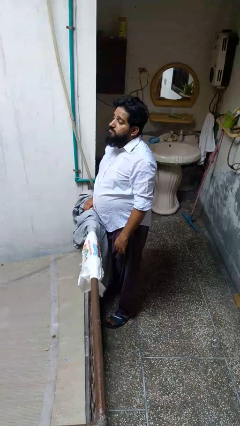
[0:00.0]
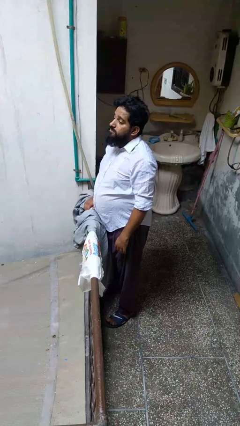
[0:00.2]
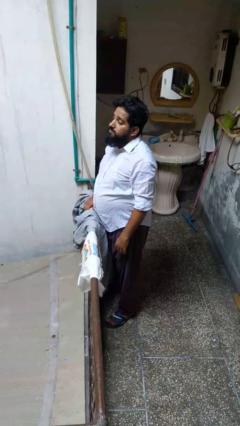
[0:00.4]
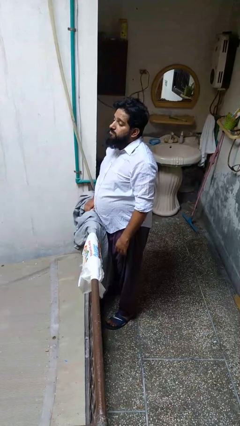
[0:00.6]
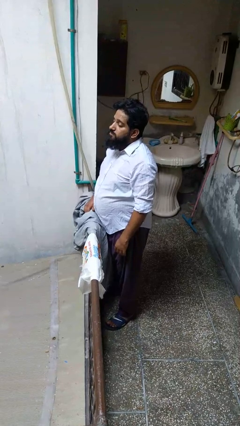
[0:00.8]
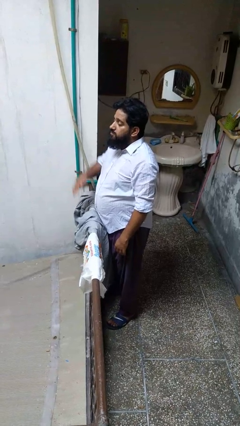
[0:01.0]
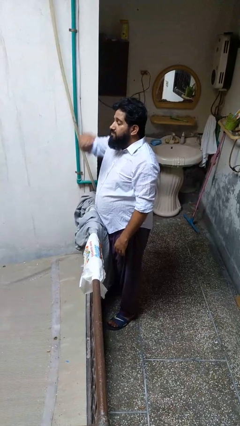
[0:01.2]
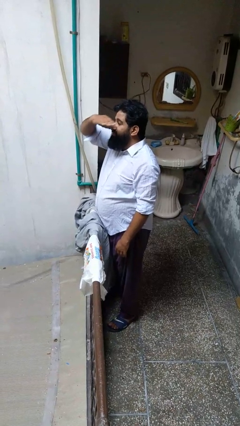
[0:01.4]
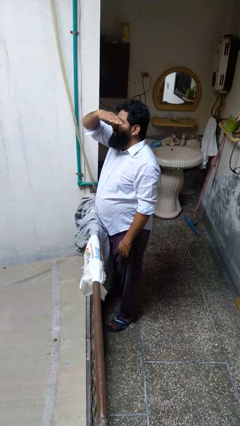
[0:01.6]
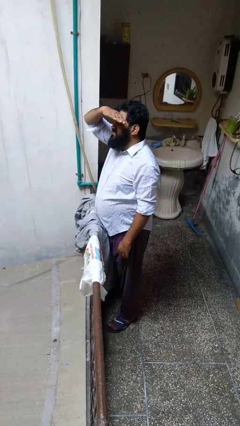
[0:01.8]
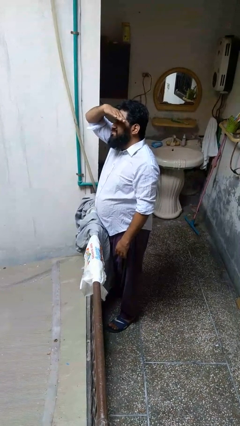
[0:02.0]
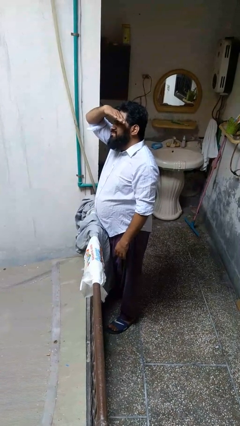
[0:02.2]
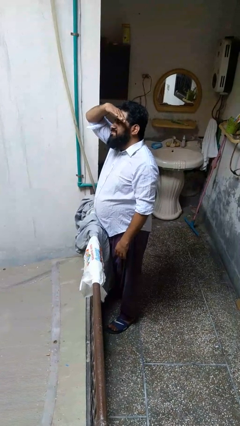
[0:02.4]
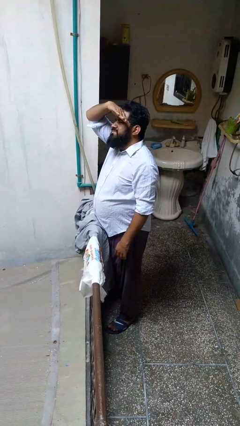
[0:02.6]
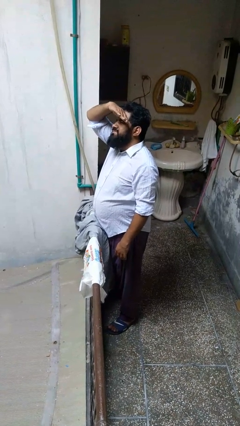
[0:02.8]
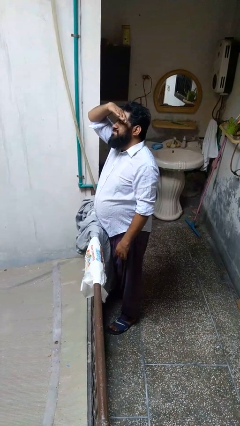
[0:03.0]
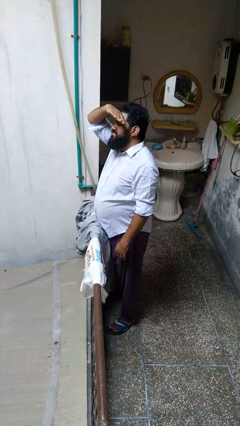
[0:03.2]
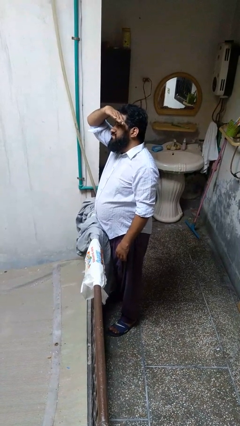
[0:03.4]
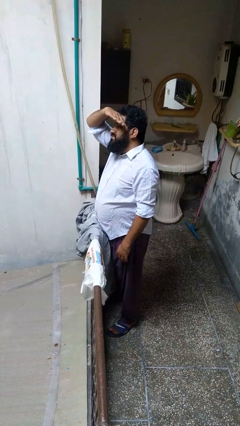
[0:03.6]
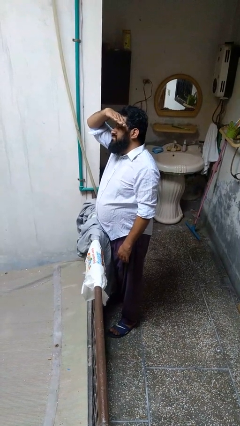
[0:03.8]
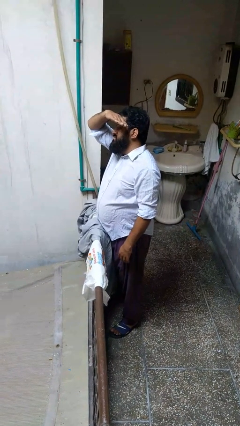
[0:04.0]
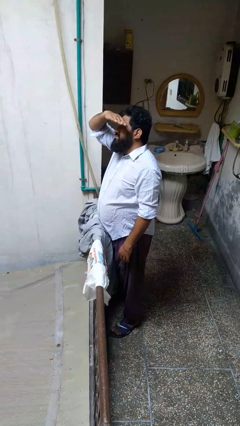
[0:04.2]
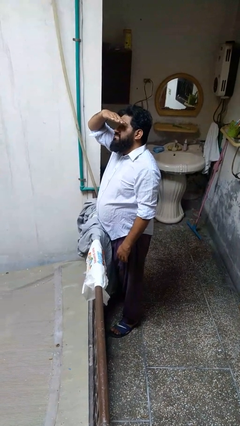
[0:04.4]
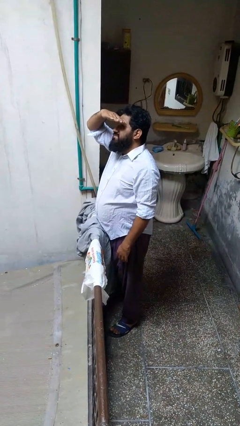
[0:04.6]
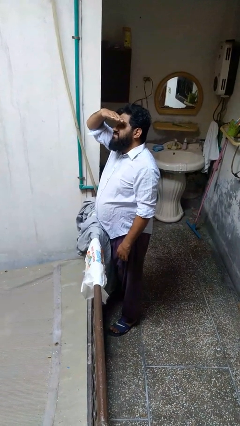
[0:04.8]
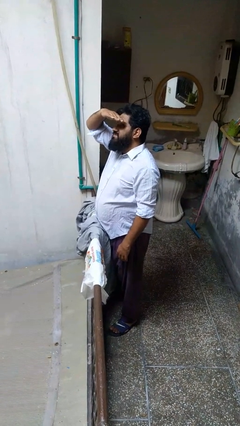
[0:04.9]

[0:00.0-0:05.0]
person shades eyes

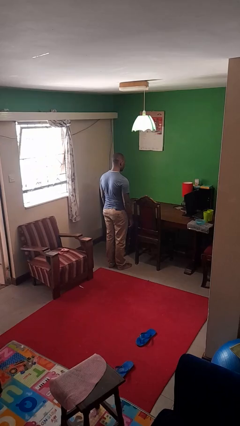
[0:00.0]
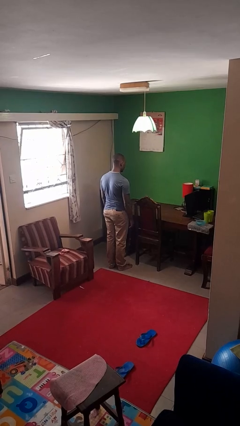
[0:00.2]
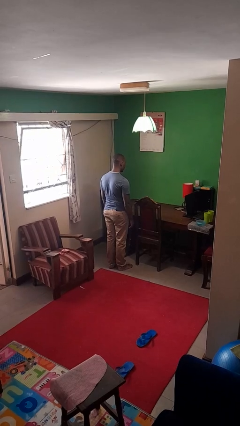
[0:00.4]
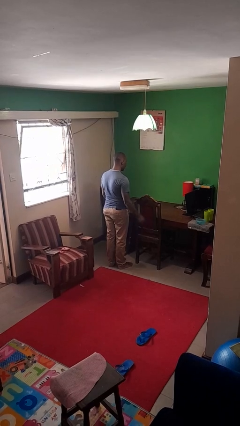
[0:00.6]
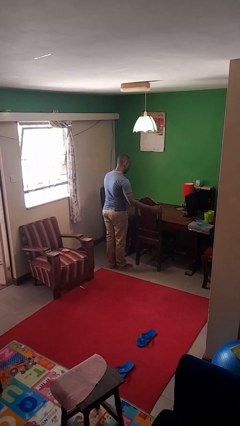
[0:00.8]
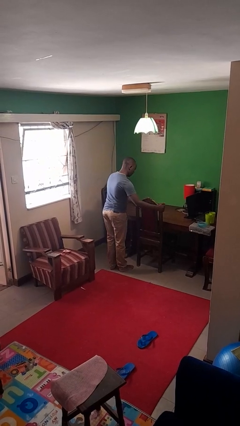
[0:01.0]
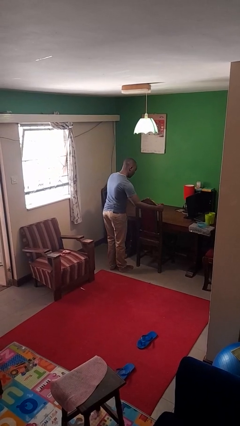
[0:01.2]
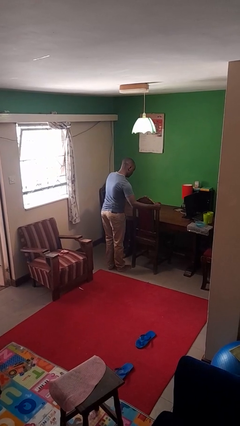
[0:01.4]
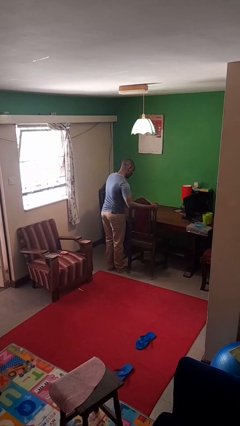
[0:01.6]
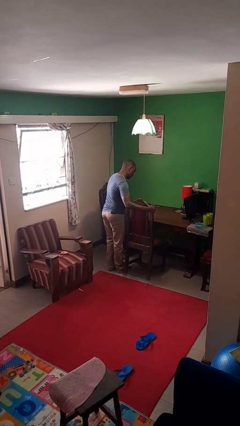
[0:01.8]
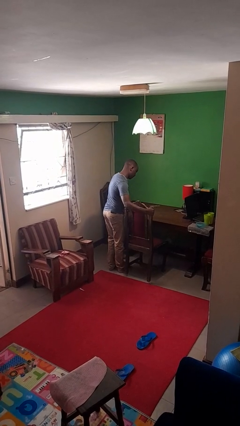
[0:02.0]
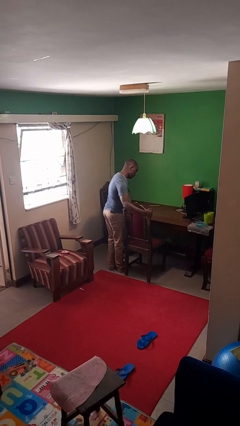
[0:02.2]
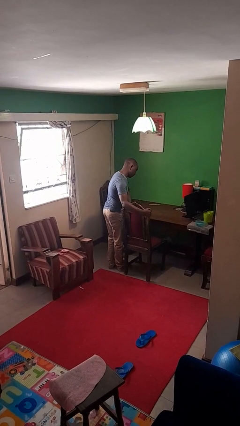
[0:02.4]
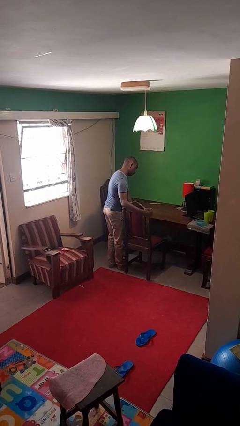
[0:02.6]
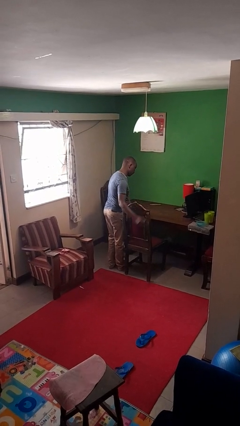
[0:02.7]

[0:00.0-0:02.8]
person pulls out chair

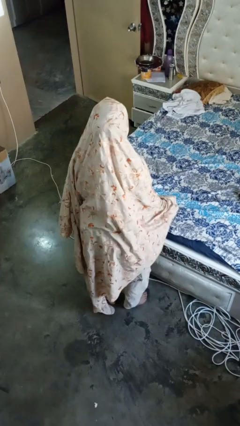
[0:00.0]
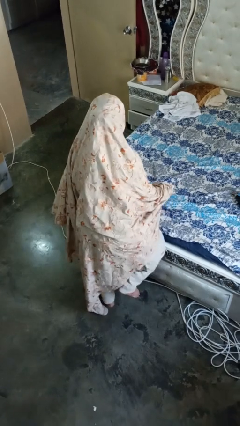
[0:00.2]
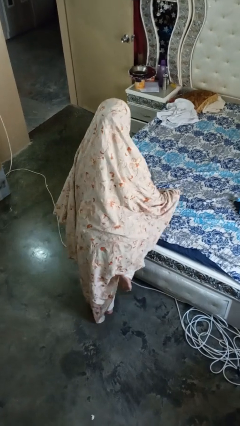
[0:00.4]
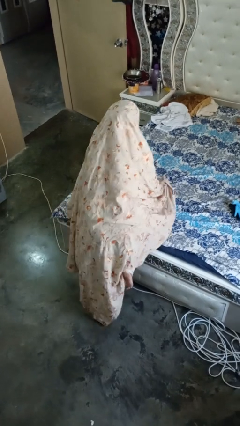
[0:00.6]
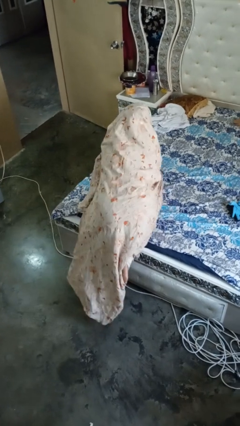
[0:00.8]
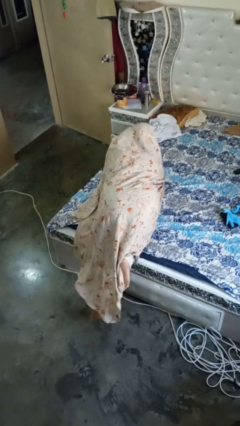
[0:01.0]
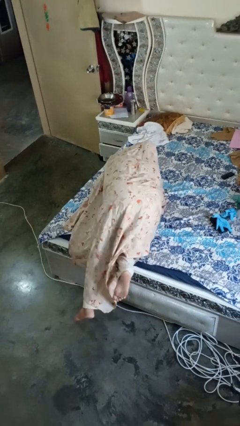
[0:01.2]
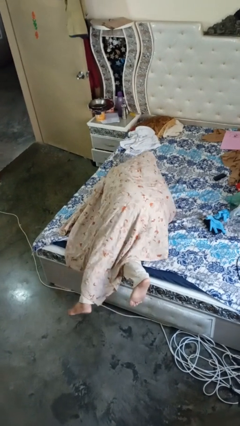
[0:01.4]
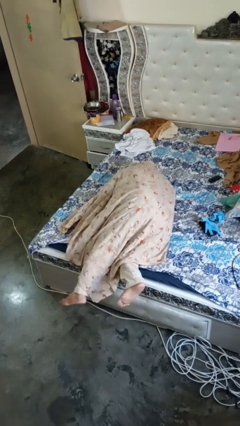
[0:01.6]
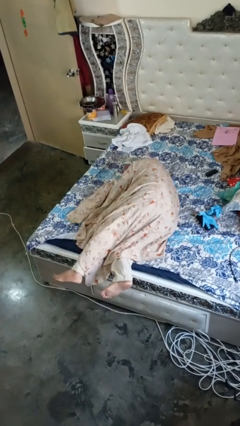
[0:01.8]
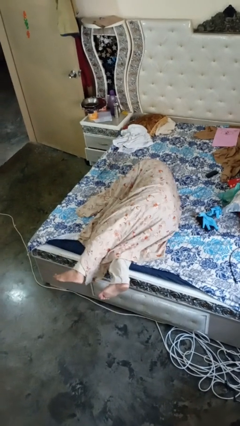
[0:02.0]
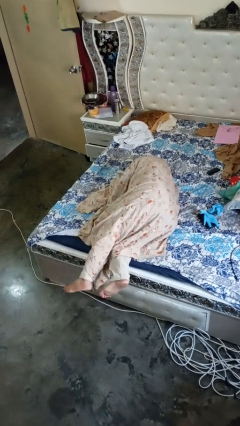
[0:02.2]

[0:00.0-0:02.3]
person lies down on bed

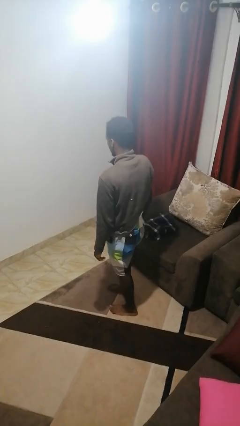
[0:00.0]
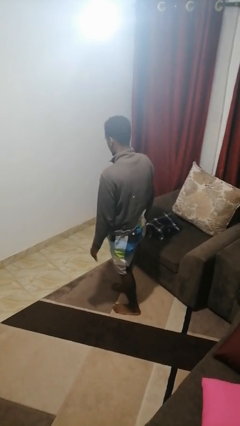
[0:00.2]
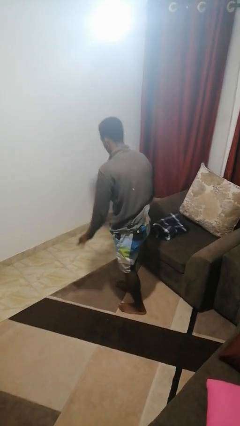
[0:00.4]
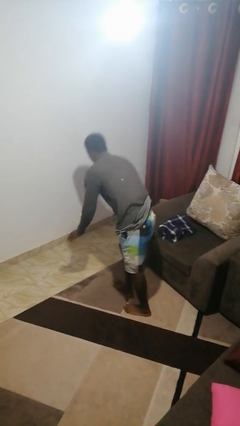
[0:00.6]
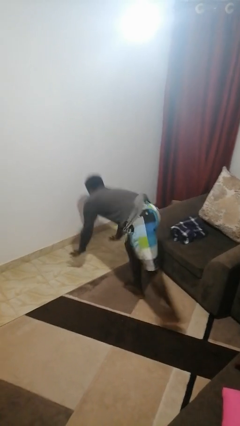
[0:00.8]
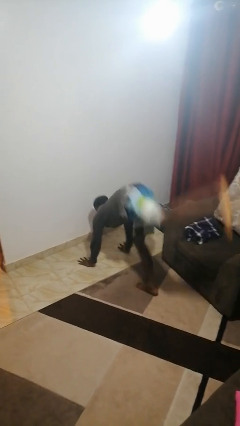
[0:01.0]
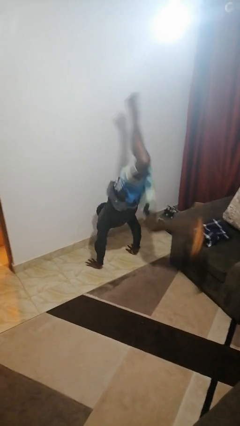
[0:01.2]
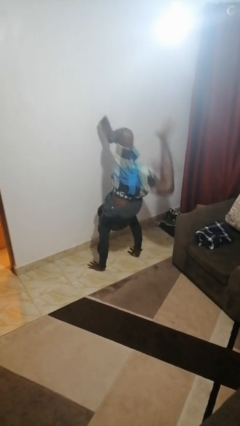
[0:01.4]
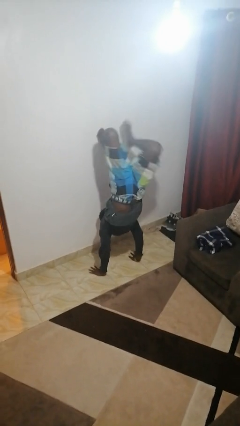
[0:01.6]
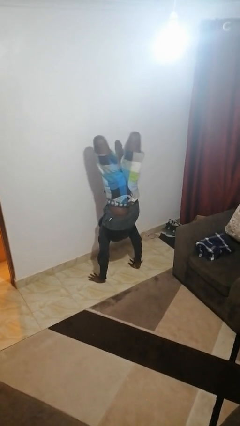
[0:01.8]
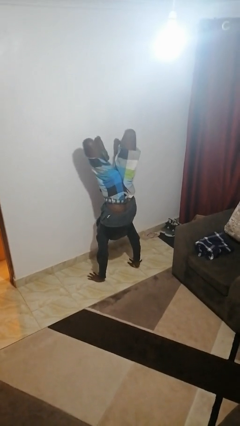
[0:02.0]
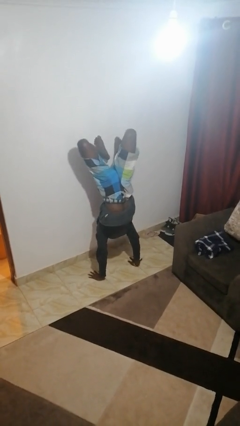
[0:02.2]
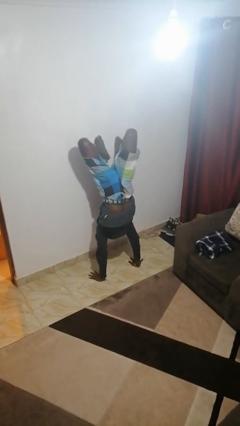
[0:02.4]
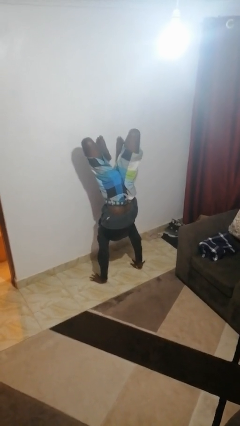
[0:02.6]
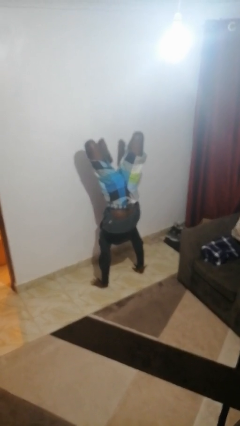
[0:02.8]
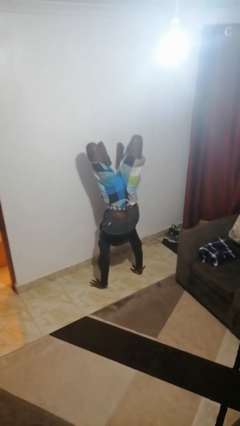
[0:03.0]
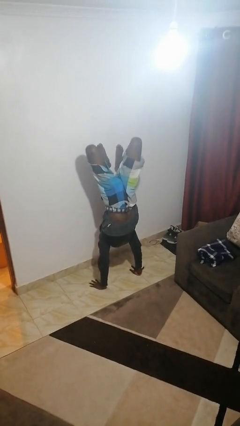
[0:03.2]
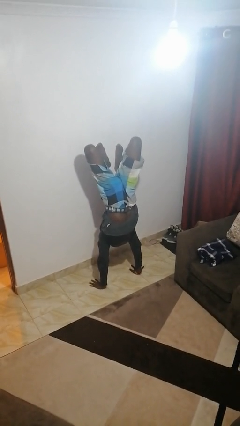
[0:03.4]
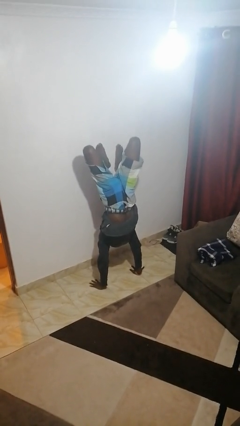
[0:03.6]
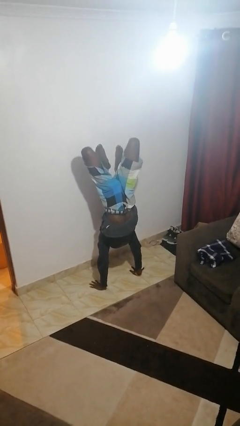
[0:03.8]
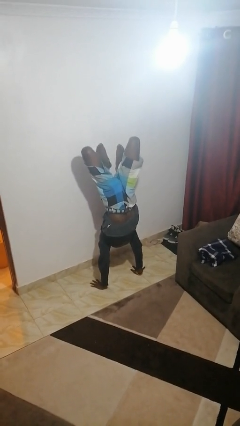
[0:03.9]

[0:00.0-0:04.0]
person handstand

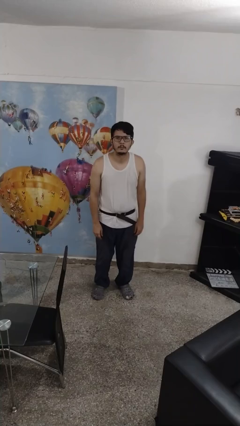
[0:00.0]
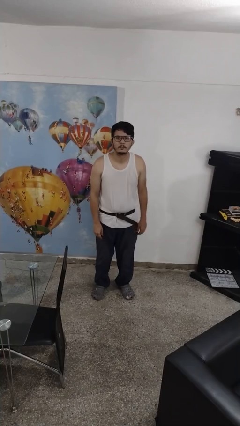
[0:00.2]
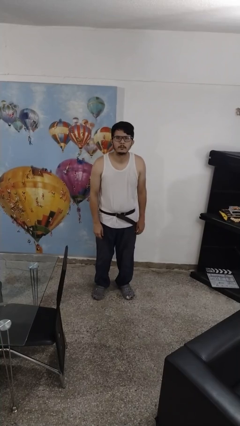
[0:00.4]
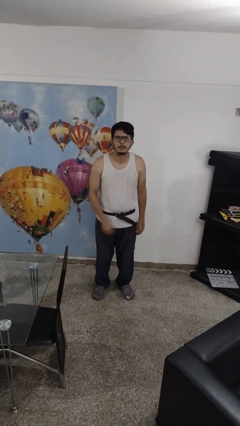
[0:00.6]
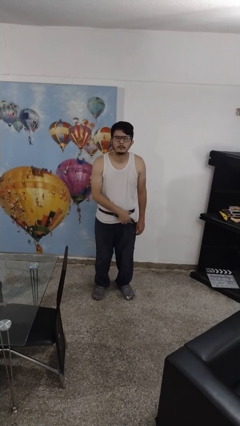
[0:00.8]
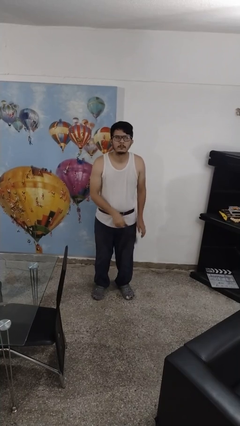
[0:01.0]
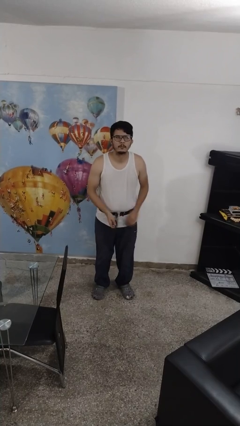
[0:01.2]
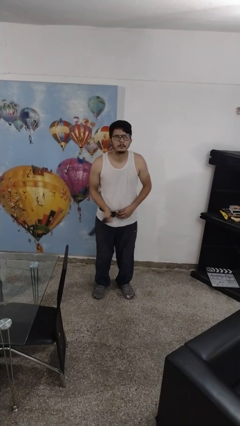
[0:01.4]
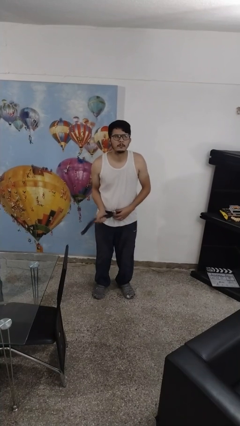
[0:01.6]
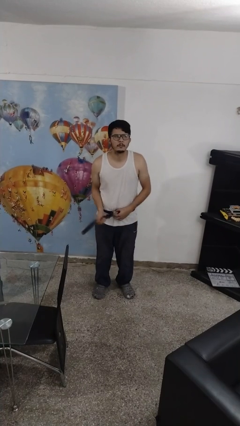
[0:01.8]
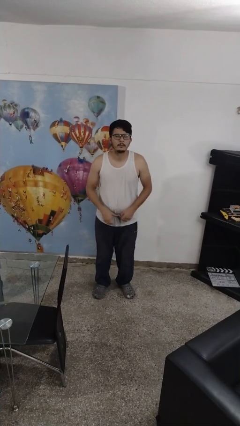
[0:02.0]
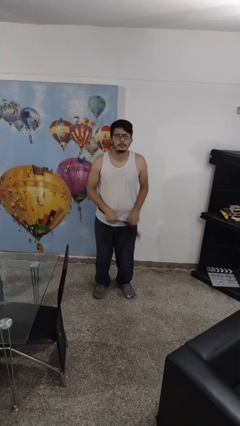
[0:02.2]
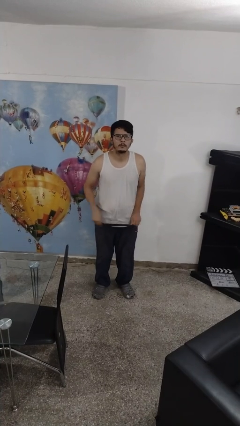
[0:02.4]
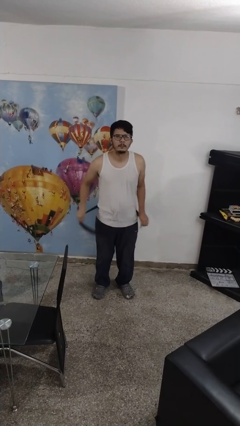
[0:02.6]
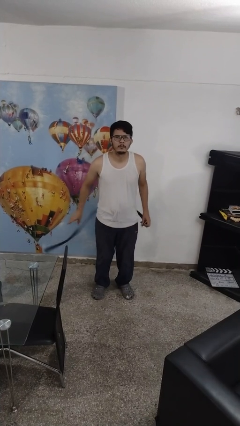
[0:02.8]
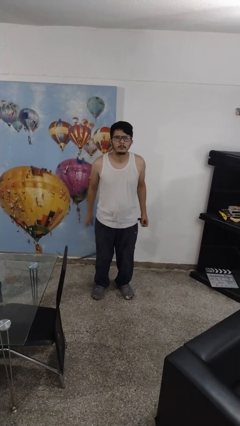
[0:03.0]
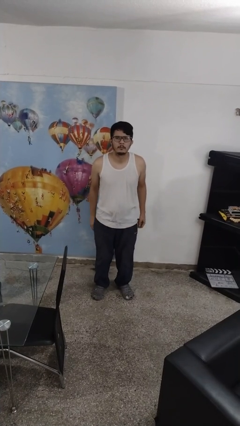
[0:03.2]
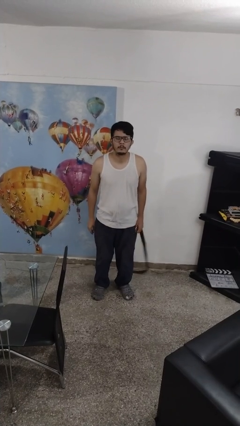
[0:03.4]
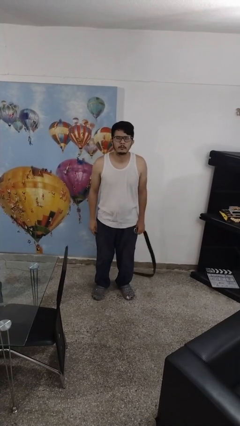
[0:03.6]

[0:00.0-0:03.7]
person takes off belt
